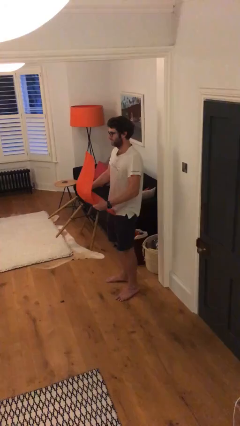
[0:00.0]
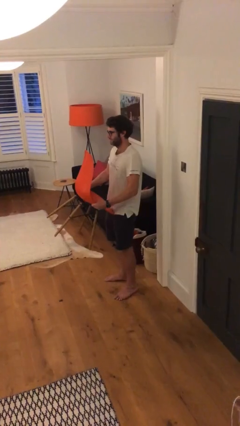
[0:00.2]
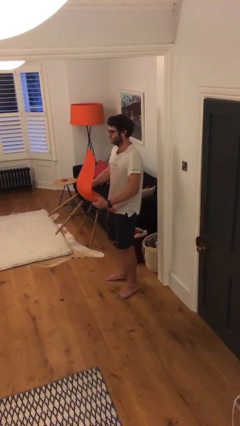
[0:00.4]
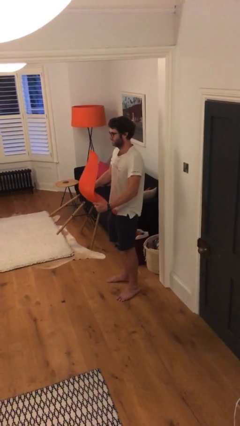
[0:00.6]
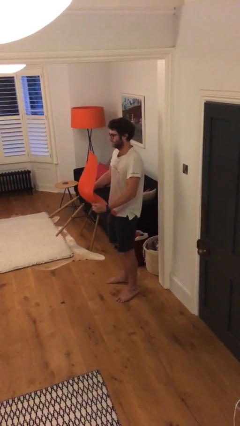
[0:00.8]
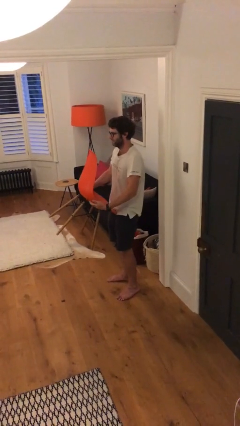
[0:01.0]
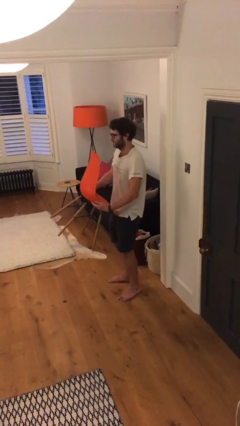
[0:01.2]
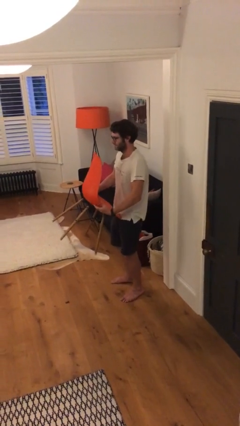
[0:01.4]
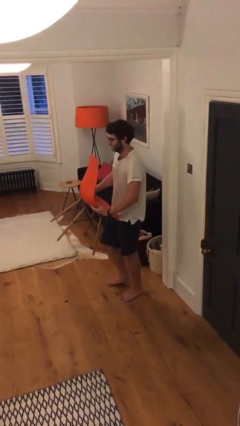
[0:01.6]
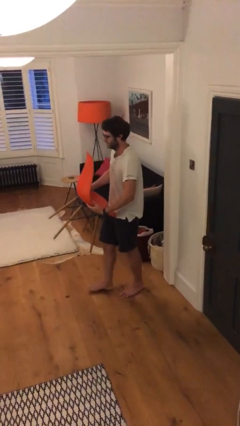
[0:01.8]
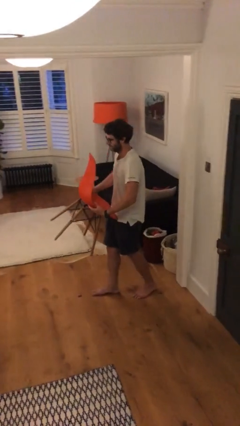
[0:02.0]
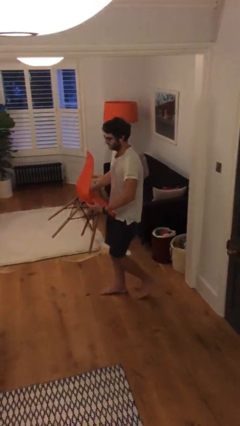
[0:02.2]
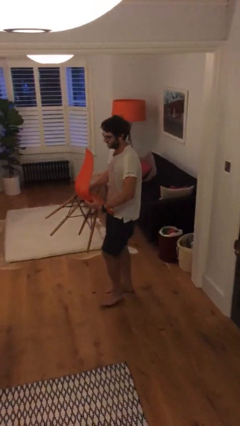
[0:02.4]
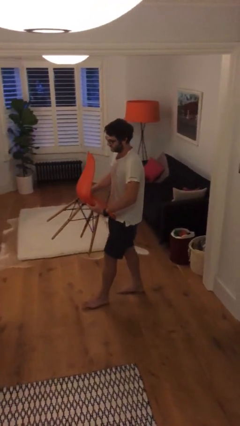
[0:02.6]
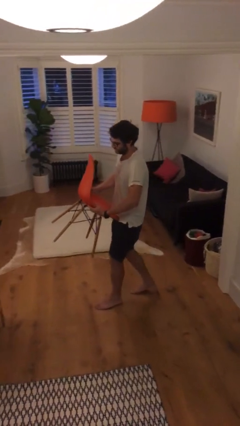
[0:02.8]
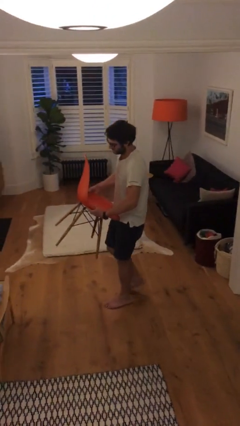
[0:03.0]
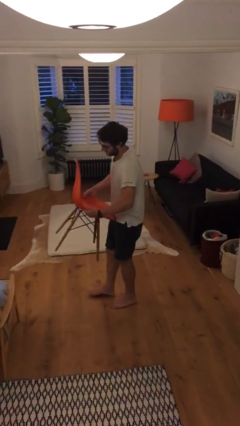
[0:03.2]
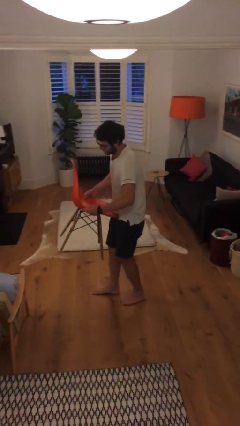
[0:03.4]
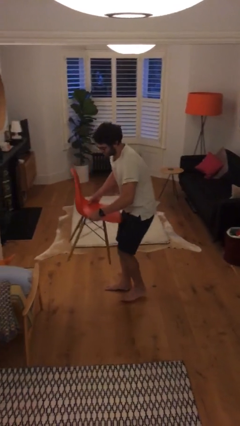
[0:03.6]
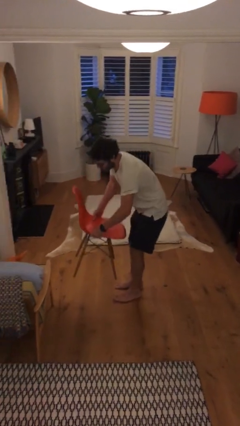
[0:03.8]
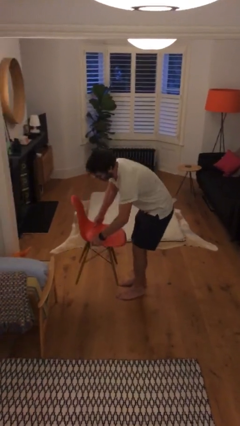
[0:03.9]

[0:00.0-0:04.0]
person carries heavy object

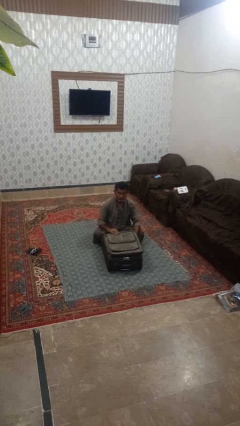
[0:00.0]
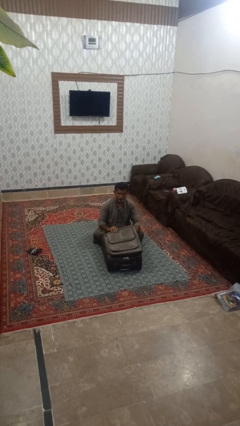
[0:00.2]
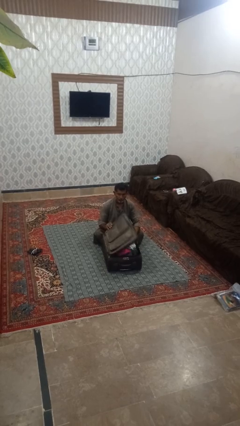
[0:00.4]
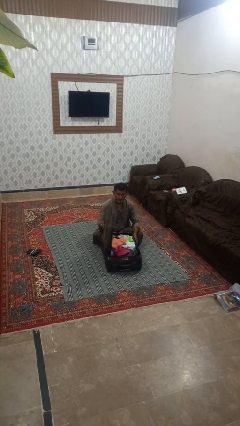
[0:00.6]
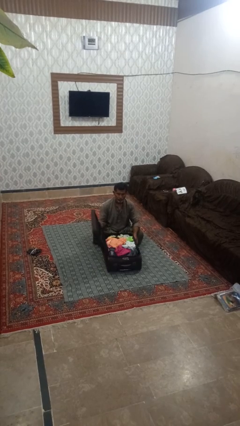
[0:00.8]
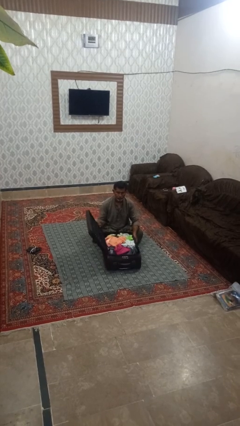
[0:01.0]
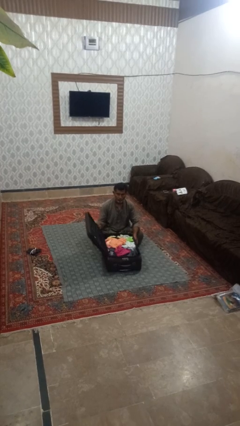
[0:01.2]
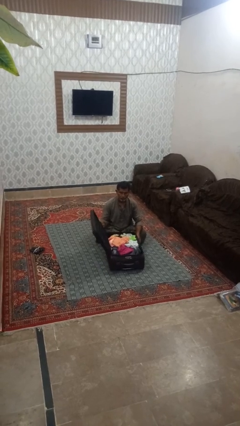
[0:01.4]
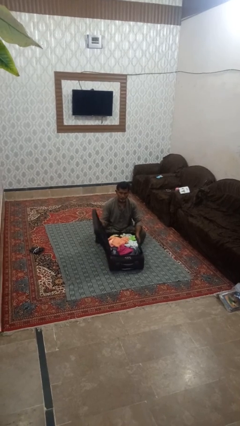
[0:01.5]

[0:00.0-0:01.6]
person opens suitcase

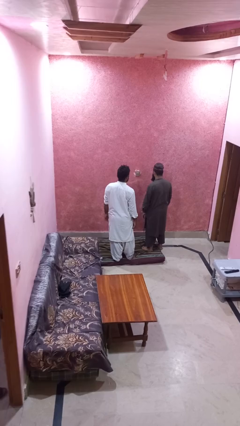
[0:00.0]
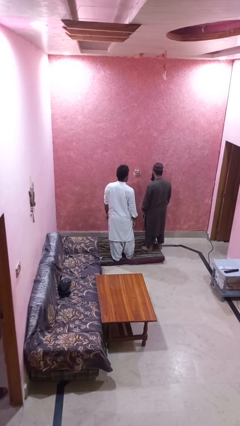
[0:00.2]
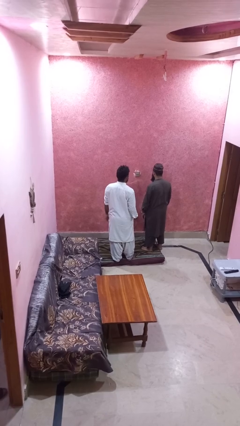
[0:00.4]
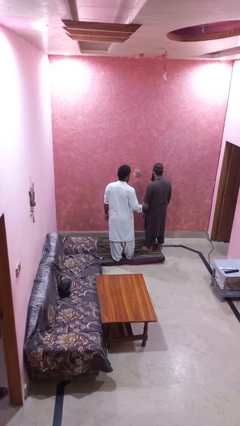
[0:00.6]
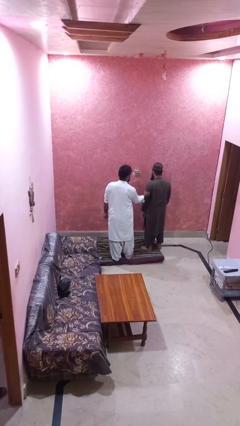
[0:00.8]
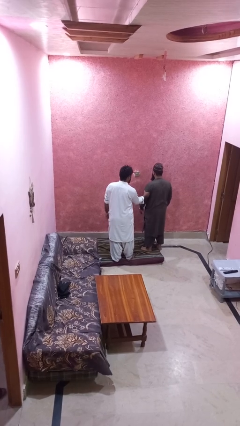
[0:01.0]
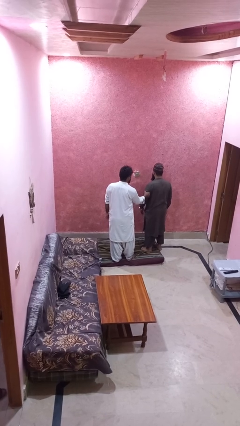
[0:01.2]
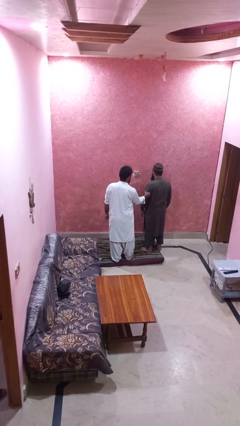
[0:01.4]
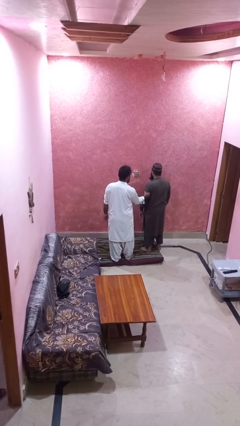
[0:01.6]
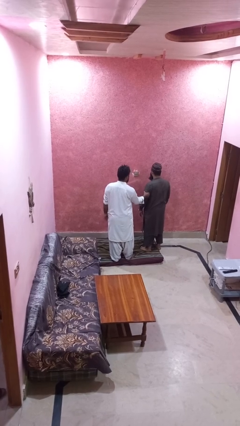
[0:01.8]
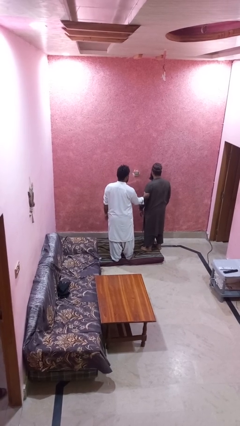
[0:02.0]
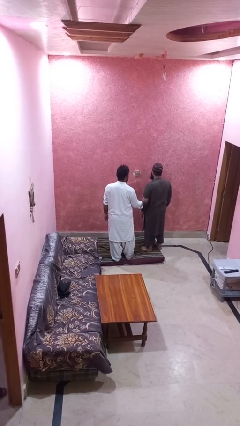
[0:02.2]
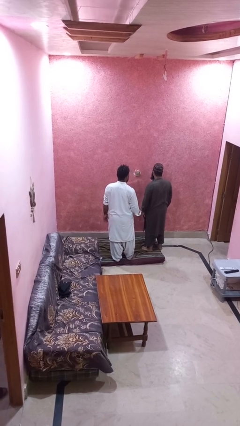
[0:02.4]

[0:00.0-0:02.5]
person grabs person by bicep

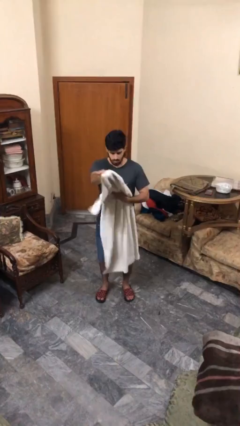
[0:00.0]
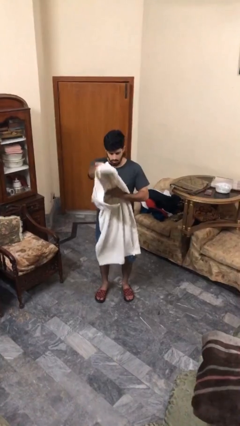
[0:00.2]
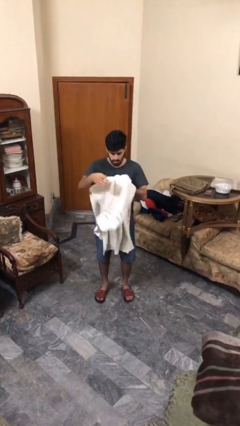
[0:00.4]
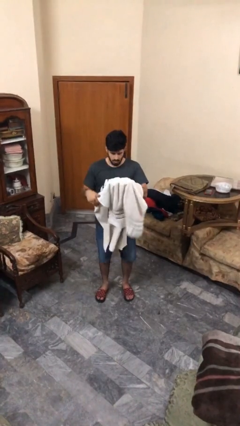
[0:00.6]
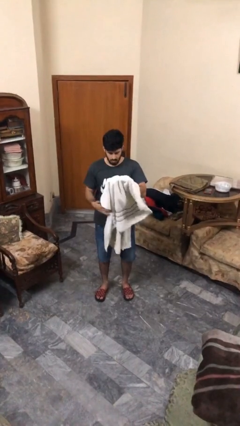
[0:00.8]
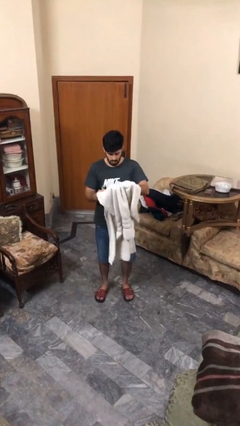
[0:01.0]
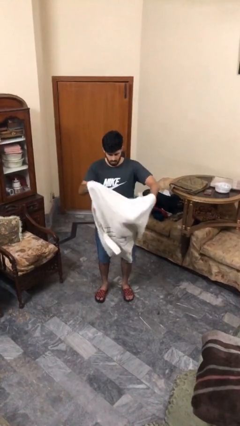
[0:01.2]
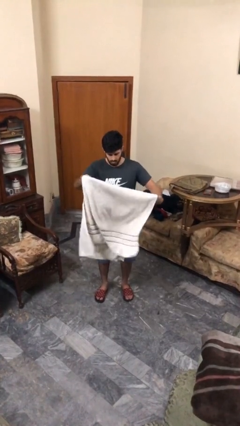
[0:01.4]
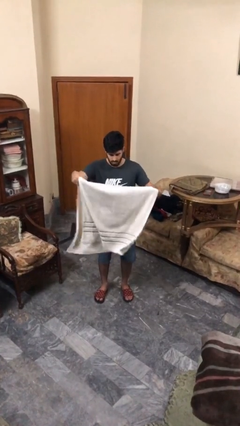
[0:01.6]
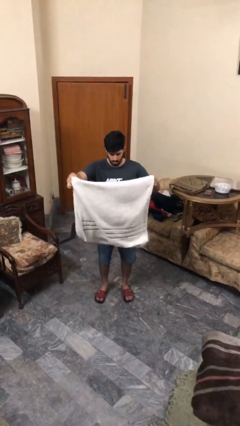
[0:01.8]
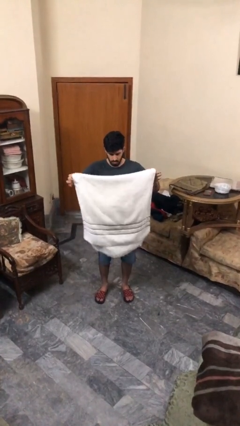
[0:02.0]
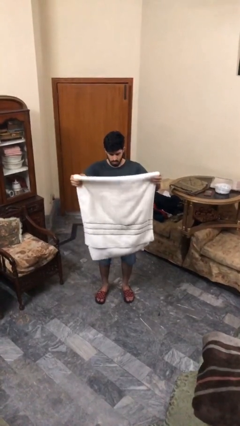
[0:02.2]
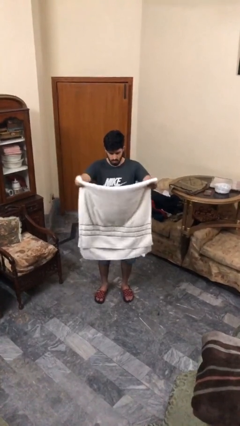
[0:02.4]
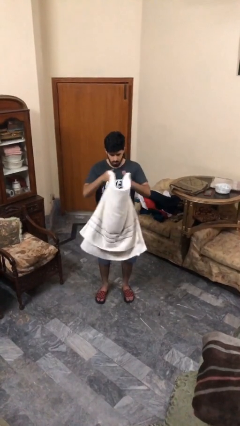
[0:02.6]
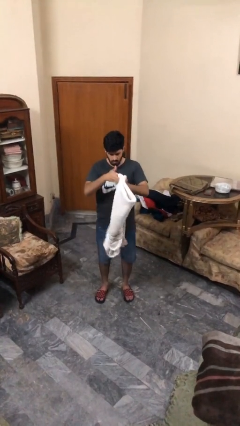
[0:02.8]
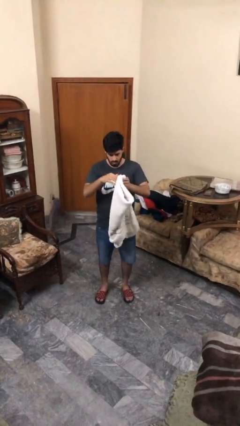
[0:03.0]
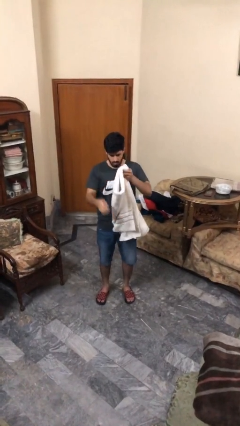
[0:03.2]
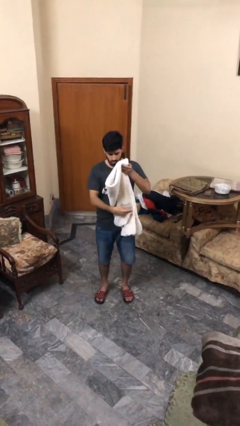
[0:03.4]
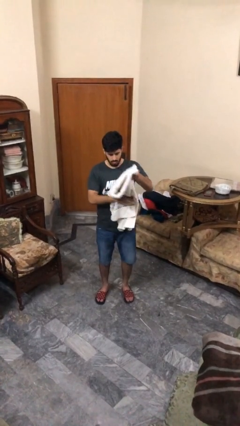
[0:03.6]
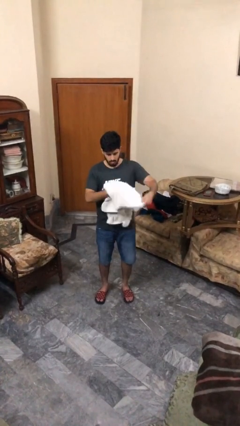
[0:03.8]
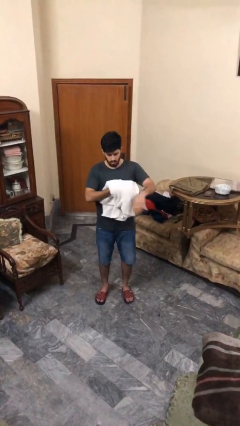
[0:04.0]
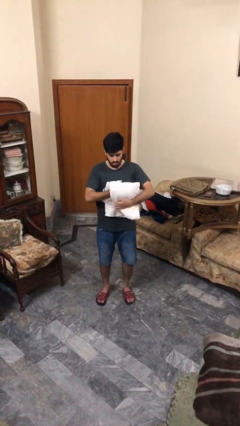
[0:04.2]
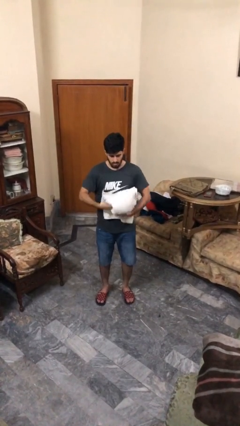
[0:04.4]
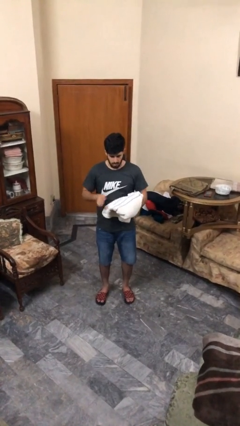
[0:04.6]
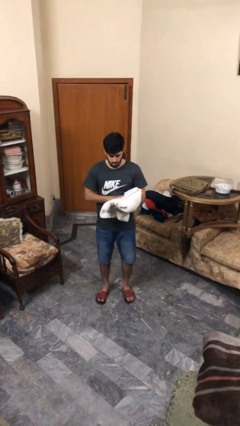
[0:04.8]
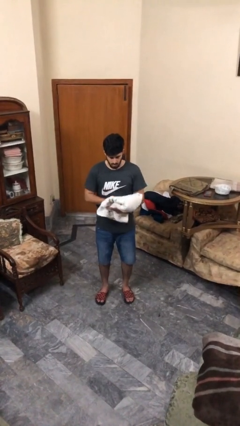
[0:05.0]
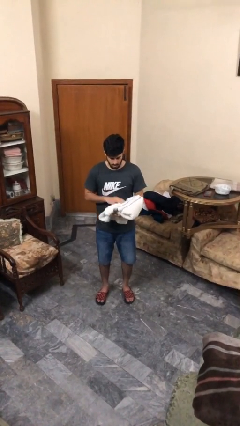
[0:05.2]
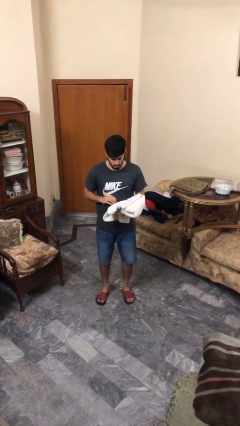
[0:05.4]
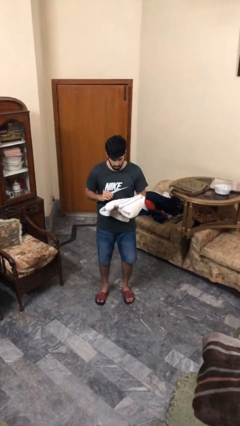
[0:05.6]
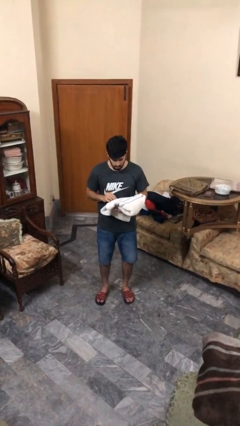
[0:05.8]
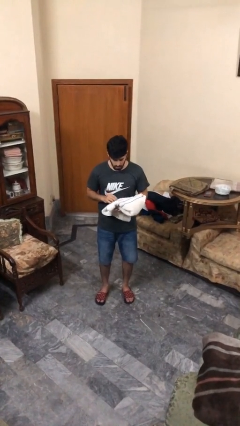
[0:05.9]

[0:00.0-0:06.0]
person folds towel

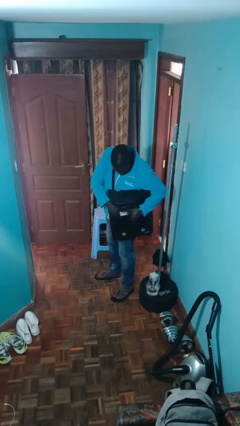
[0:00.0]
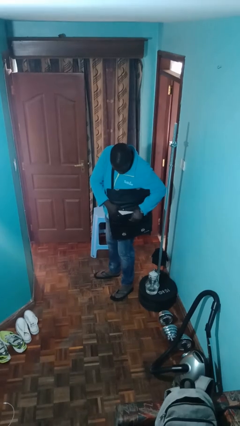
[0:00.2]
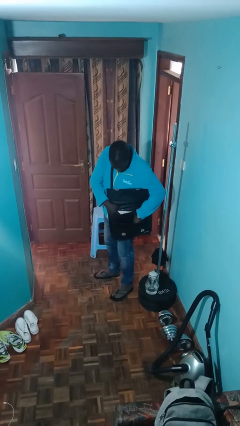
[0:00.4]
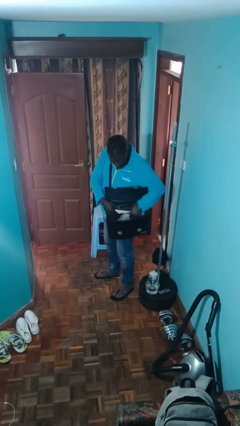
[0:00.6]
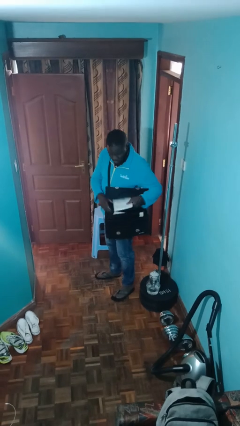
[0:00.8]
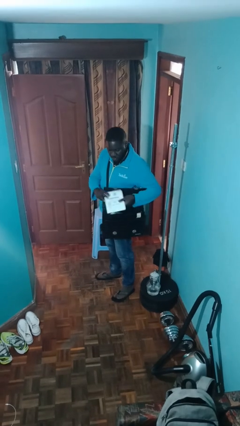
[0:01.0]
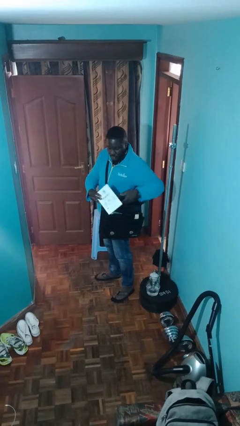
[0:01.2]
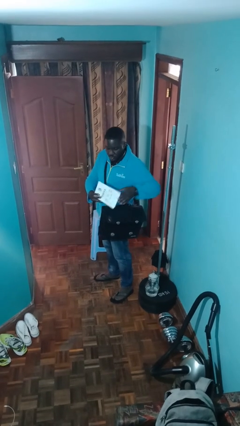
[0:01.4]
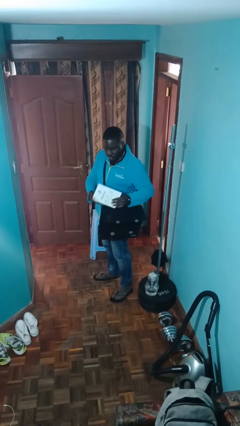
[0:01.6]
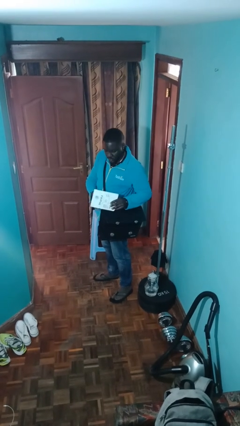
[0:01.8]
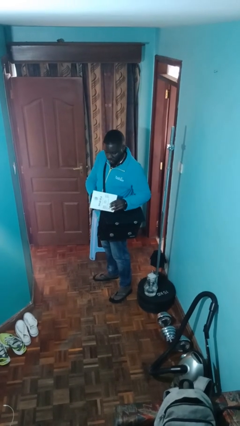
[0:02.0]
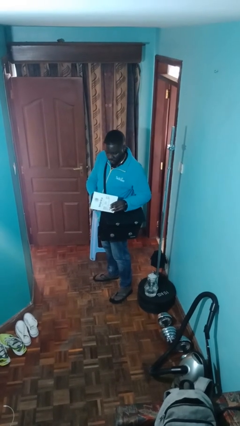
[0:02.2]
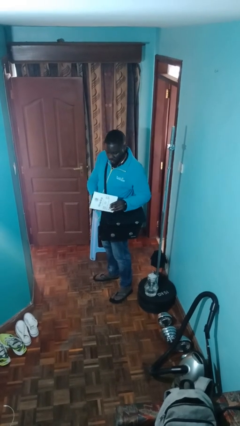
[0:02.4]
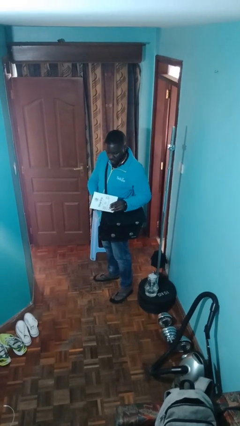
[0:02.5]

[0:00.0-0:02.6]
person takes object from purse

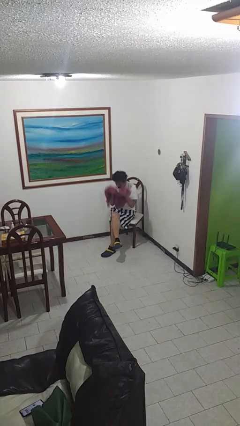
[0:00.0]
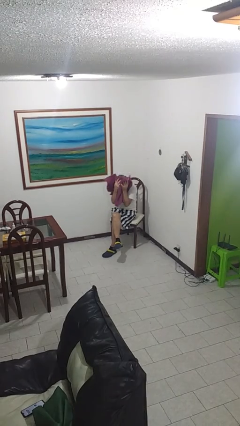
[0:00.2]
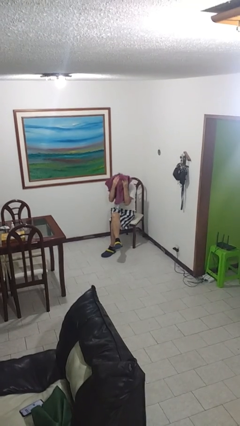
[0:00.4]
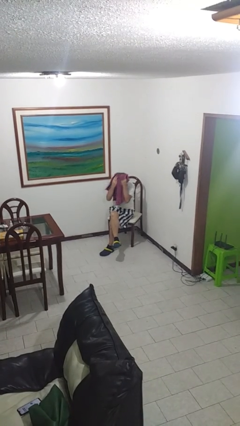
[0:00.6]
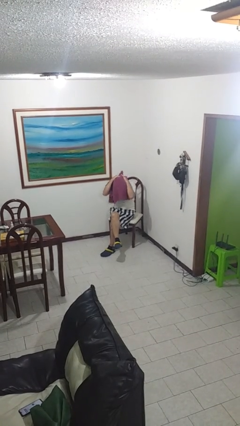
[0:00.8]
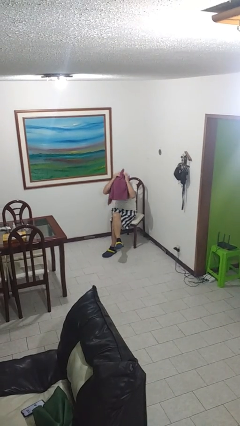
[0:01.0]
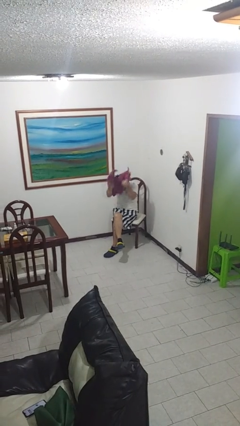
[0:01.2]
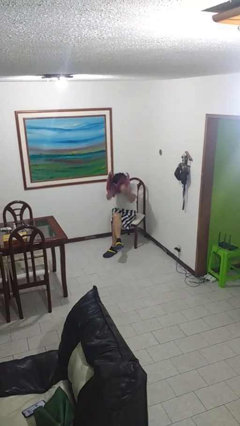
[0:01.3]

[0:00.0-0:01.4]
person dries hair with towel
